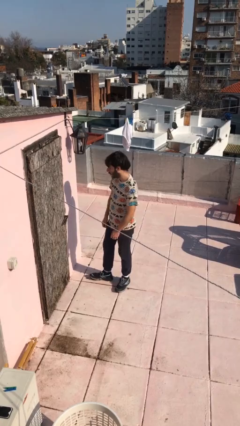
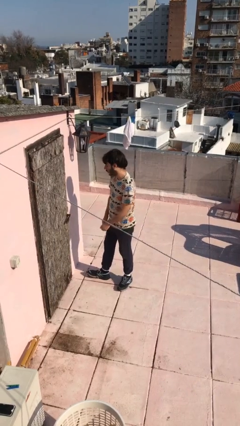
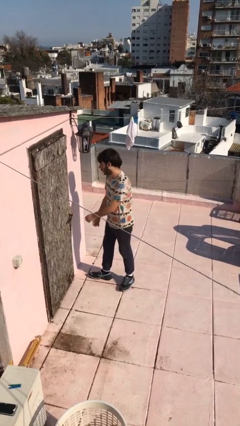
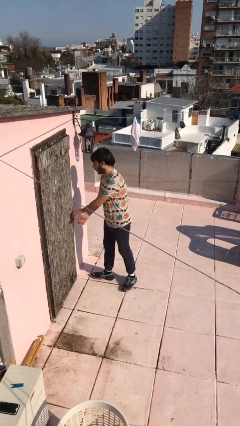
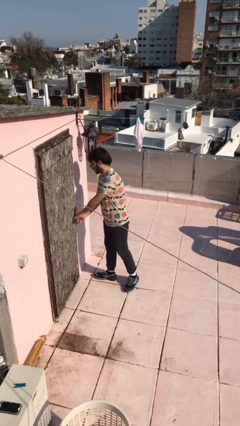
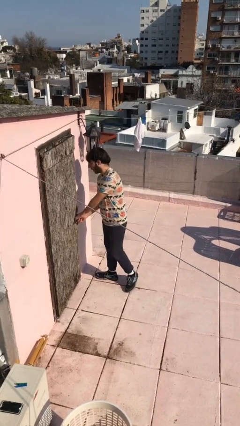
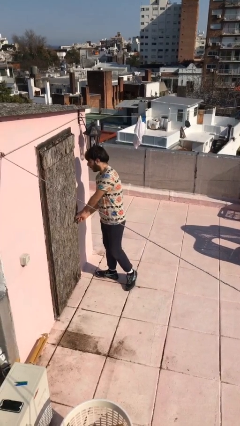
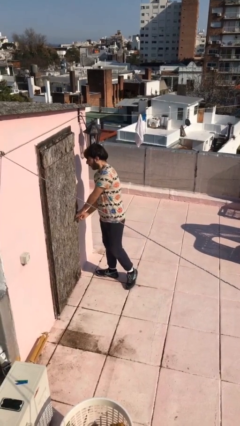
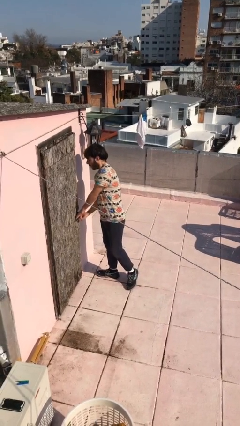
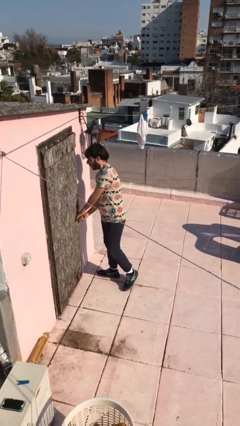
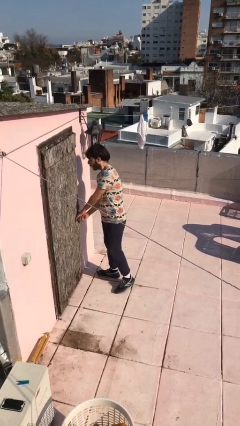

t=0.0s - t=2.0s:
person unlocks door with keys

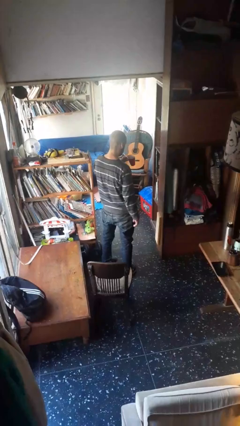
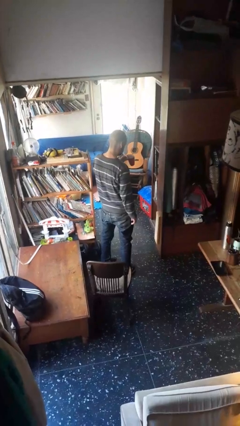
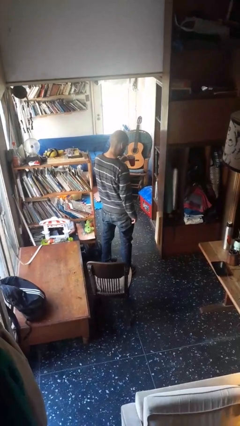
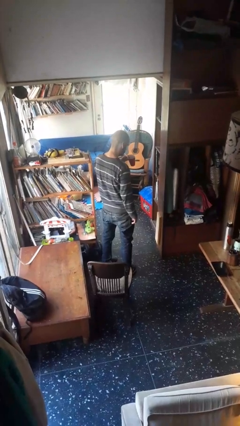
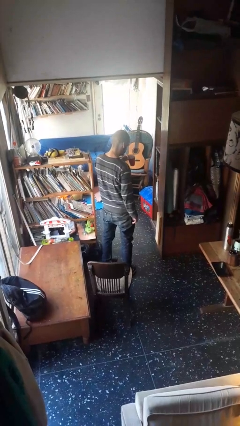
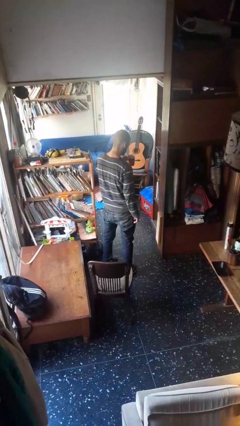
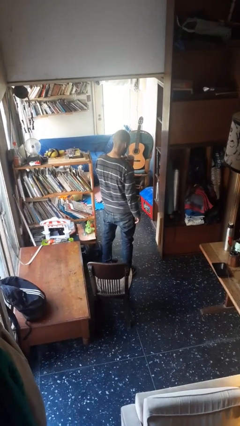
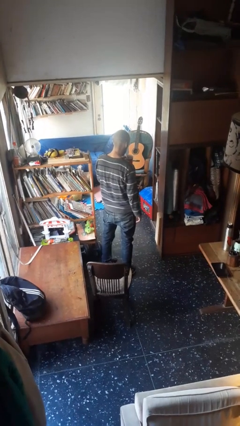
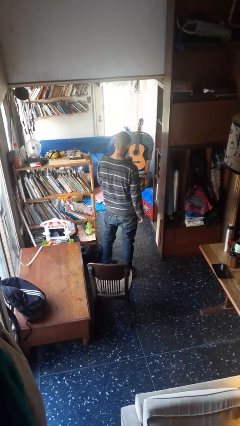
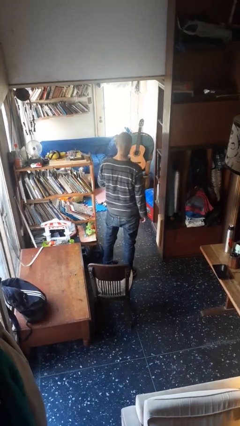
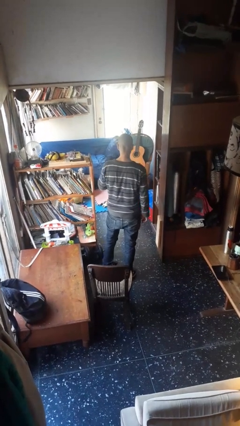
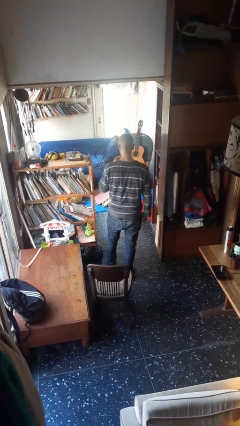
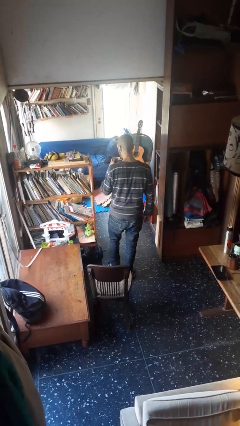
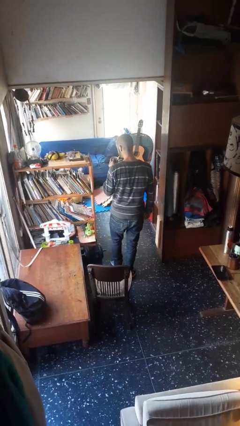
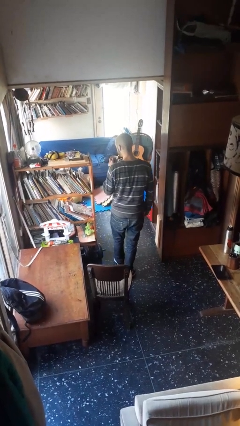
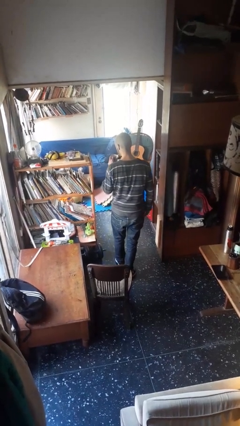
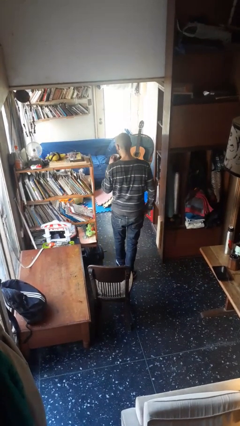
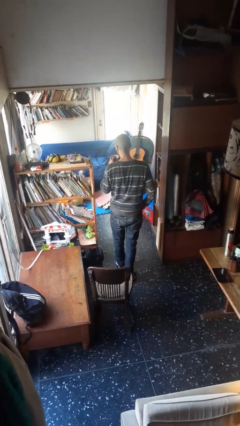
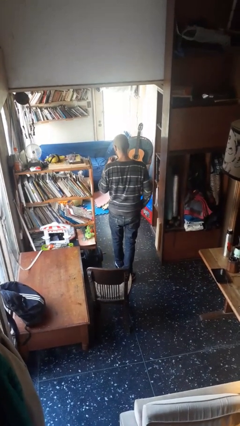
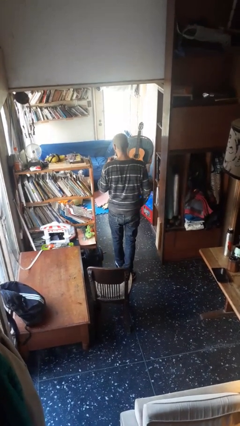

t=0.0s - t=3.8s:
person drinks from straw

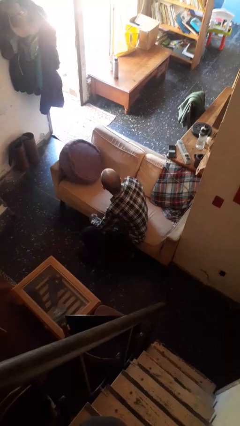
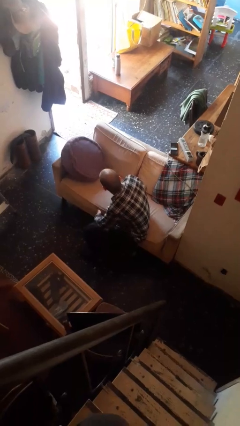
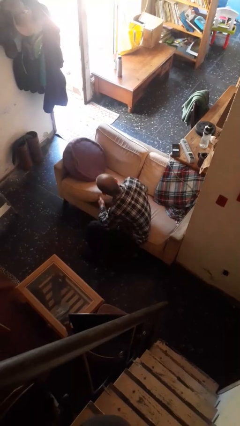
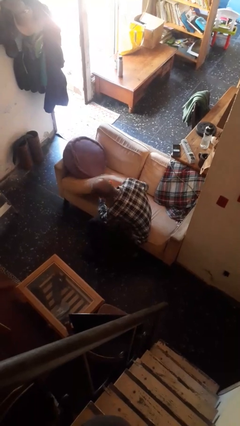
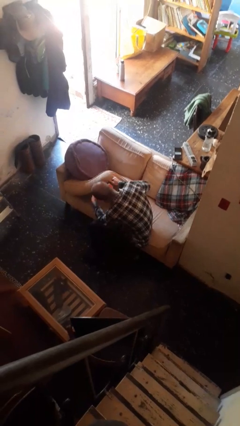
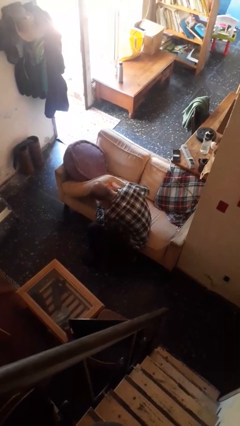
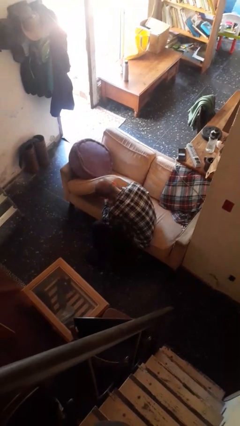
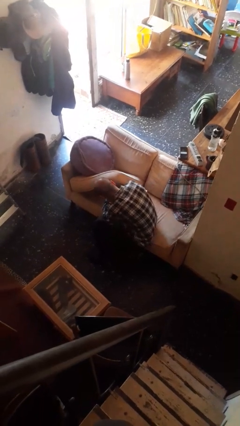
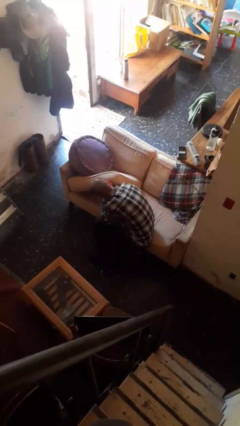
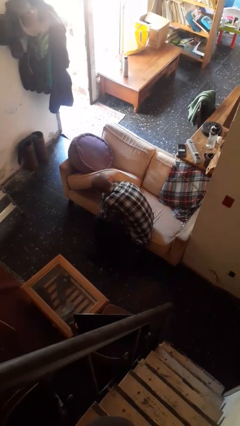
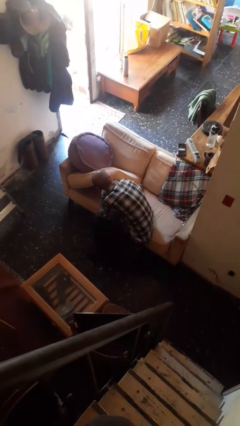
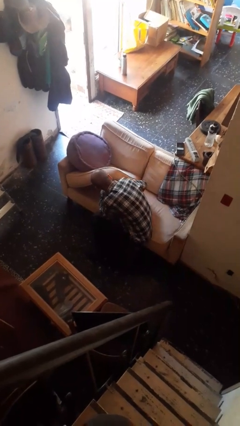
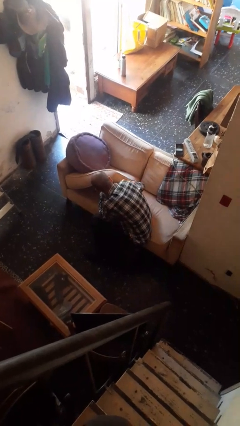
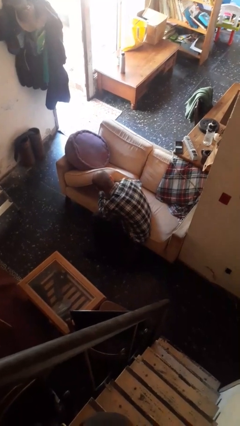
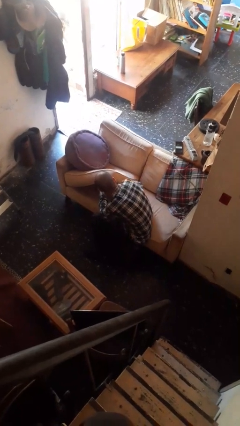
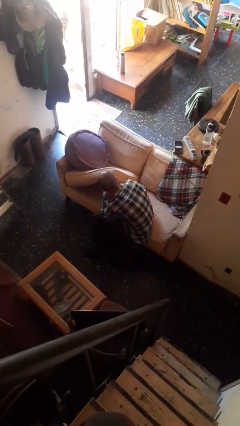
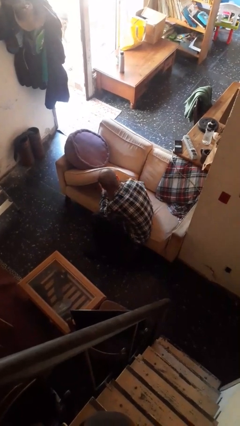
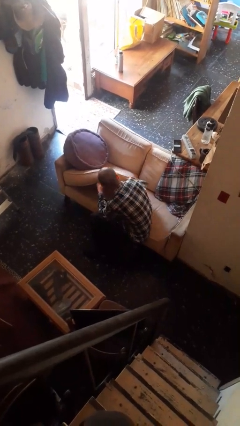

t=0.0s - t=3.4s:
person searches in couch

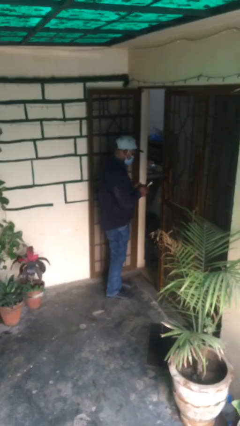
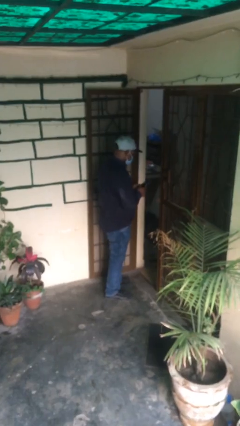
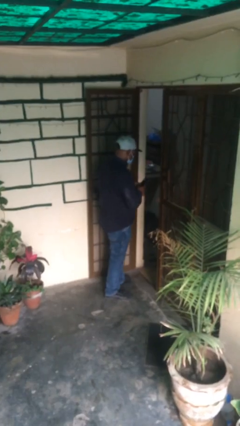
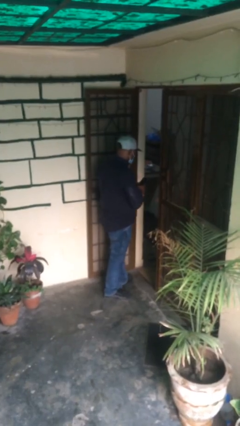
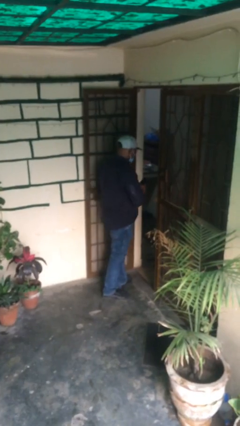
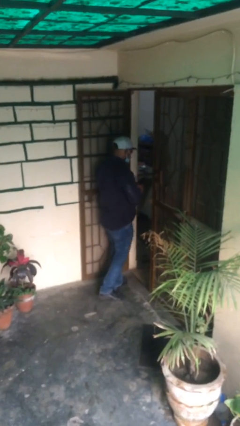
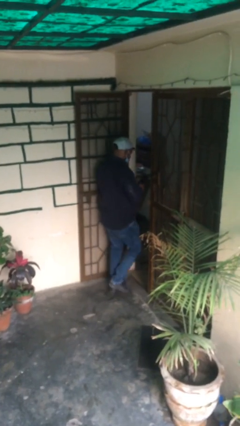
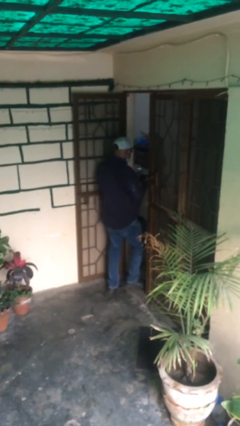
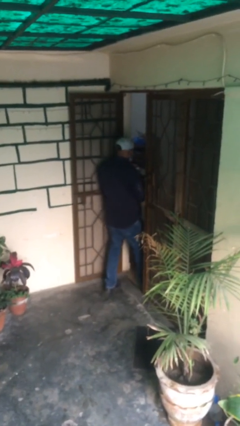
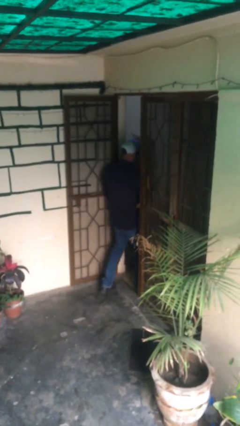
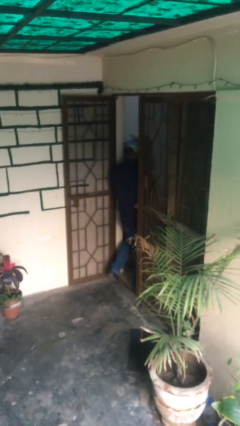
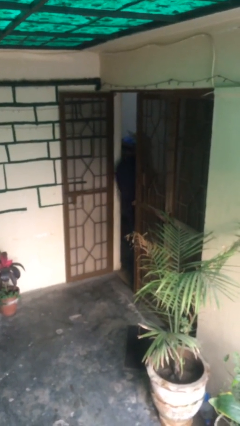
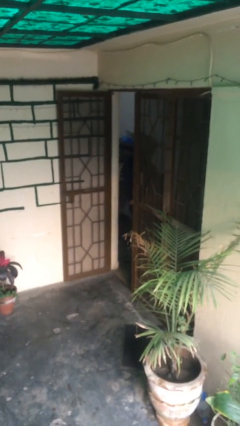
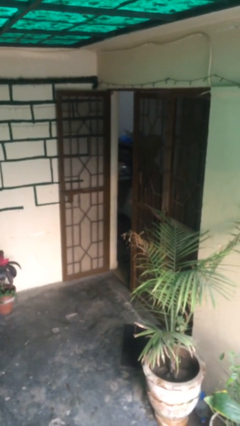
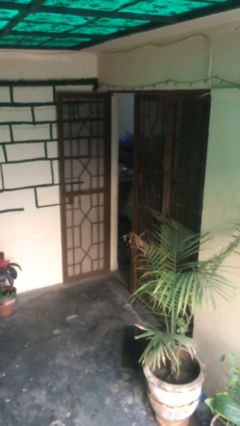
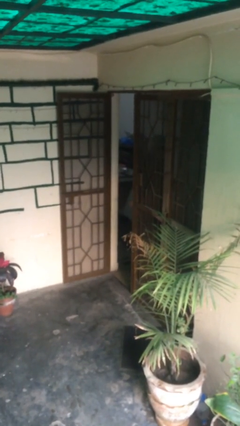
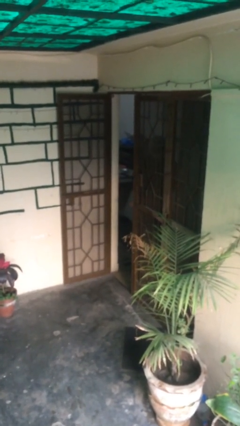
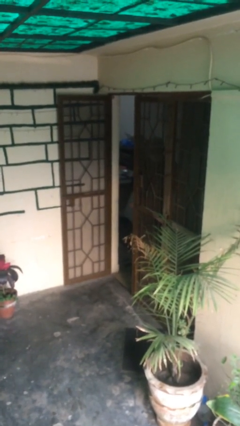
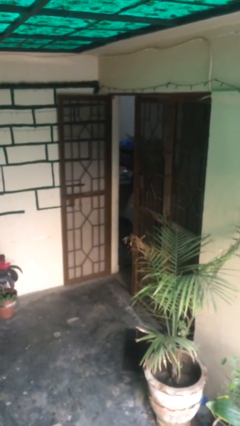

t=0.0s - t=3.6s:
person exits scene through structure

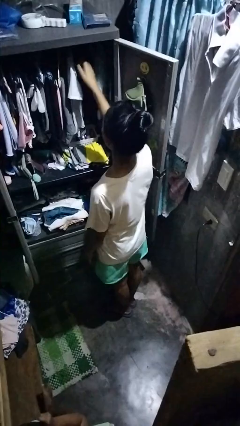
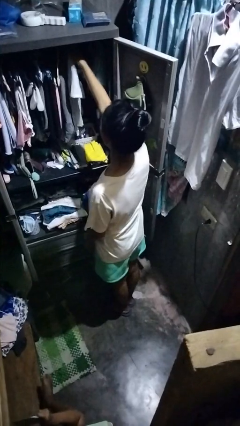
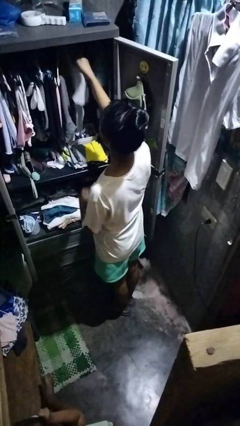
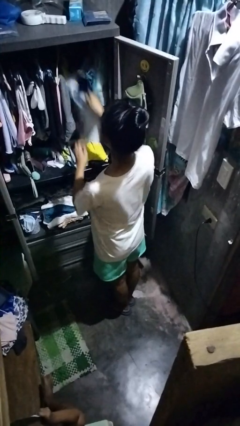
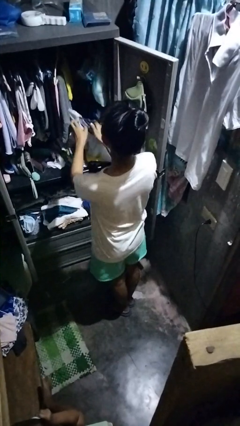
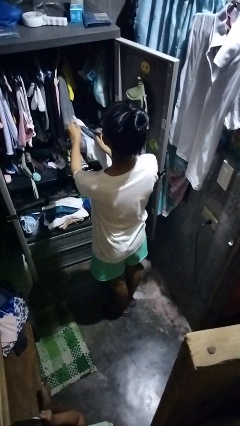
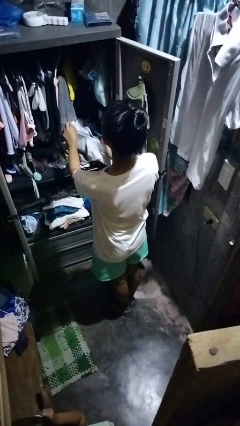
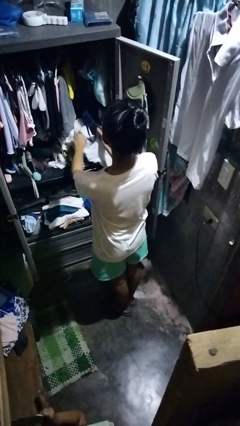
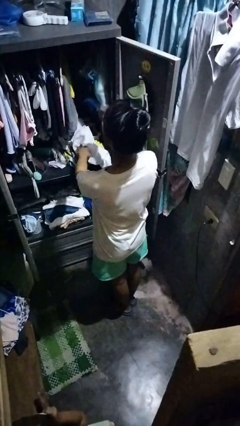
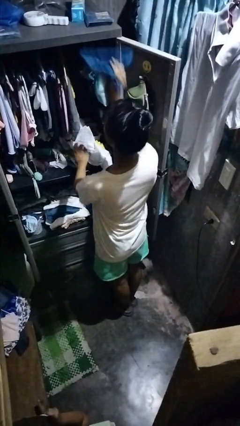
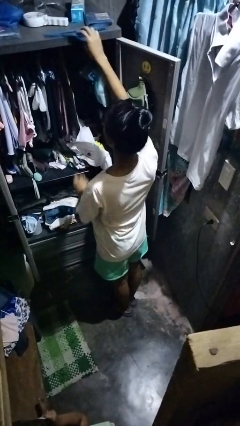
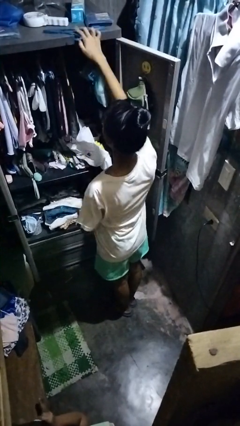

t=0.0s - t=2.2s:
person takes clothes from closet

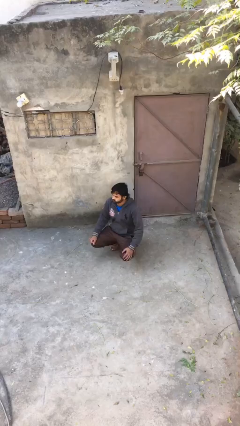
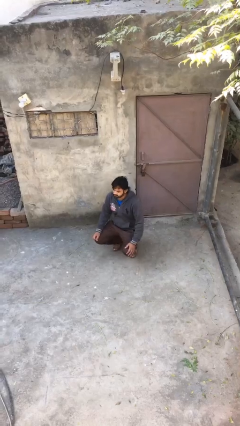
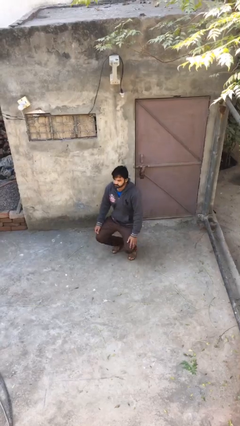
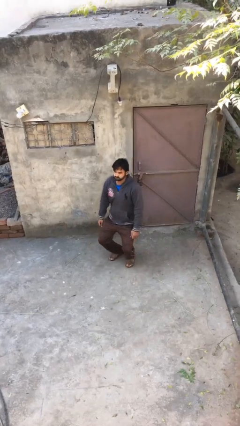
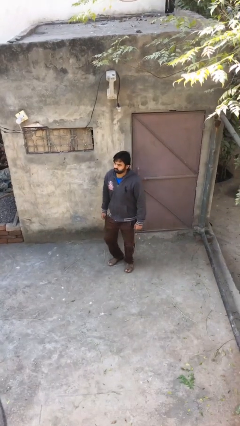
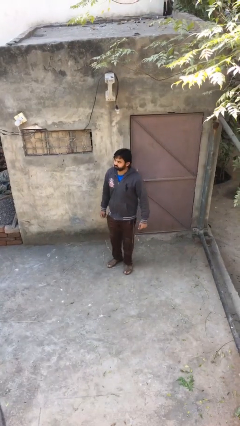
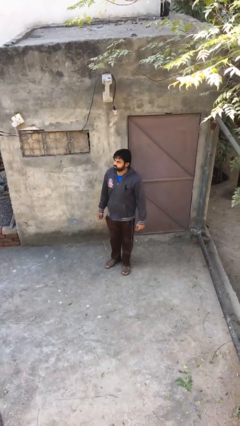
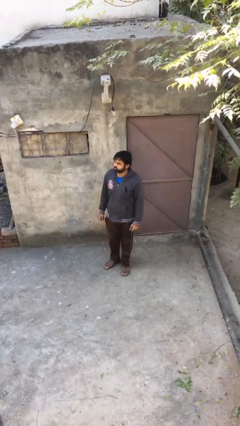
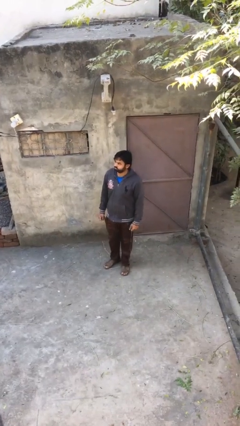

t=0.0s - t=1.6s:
person stands up

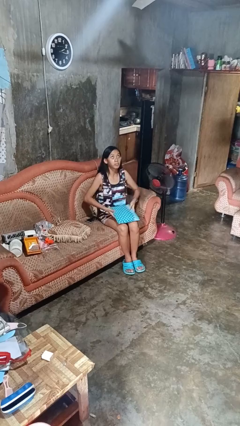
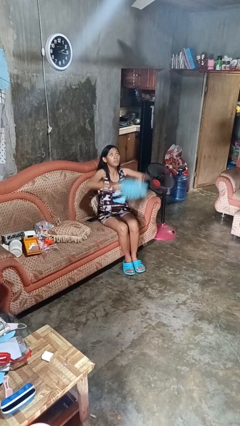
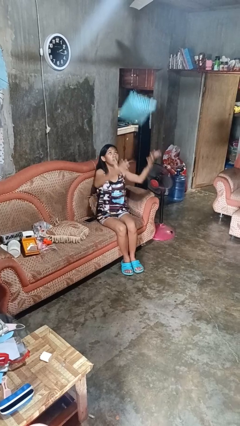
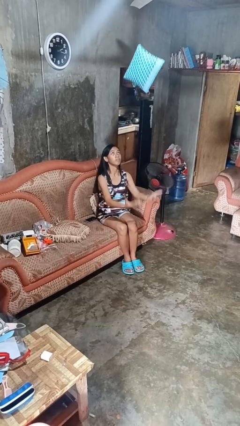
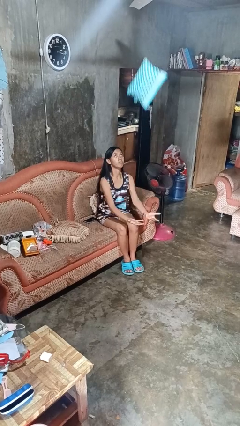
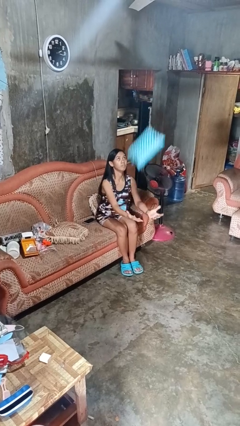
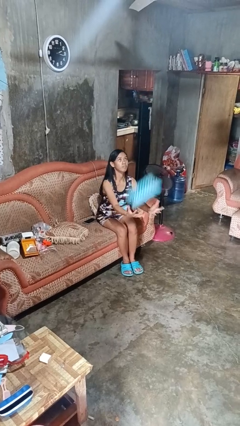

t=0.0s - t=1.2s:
person drops object
